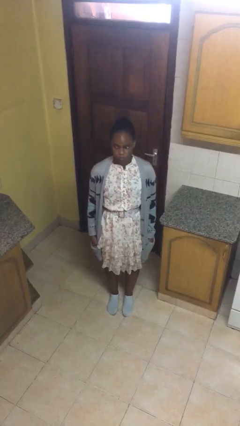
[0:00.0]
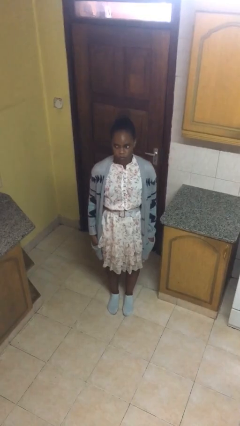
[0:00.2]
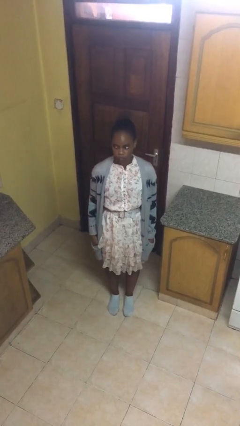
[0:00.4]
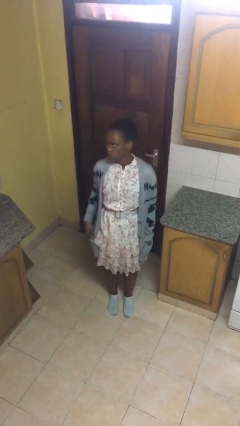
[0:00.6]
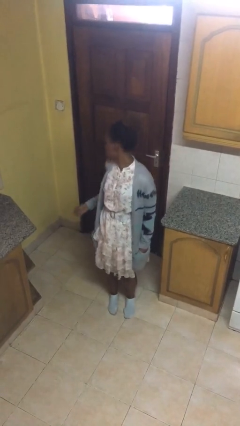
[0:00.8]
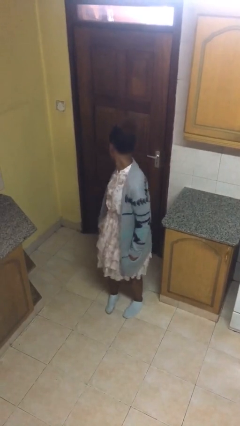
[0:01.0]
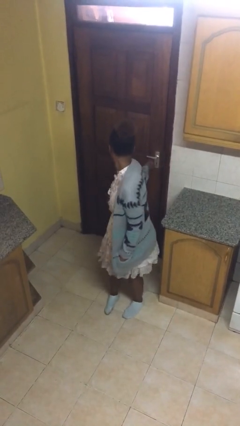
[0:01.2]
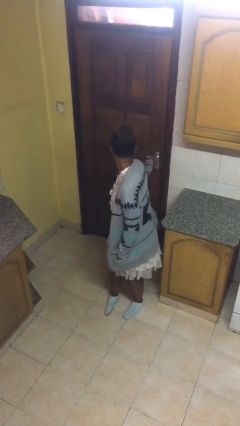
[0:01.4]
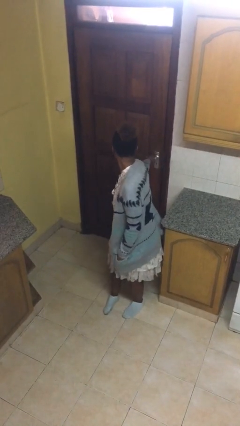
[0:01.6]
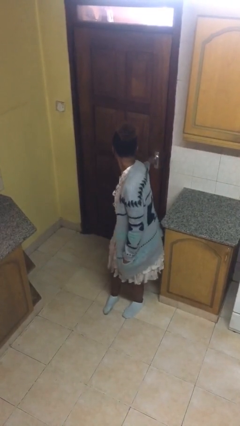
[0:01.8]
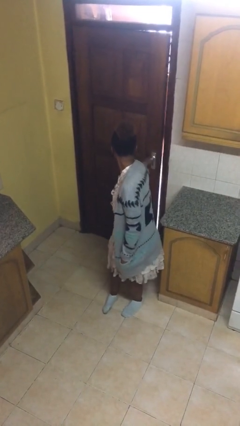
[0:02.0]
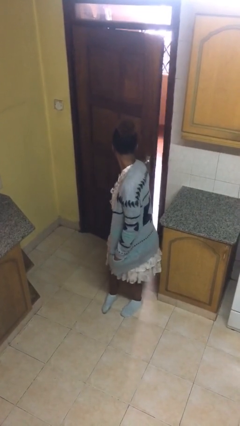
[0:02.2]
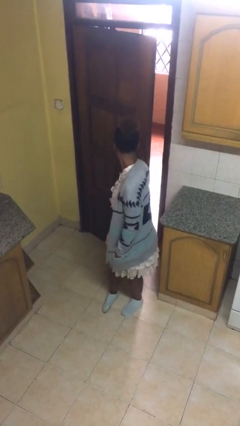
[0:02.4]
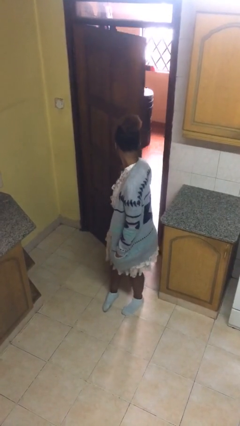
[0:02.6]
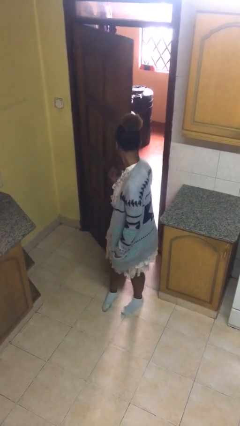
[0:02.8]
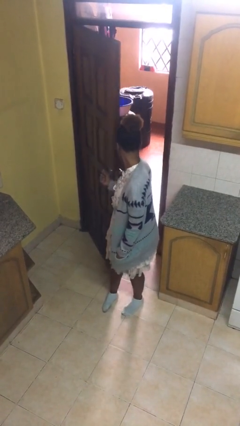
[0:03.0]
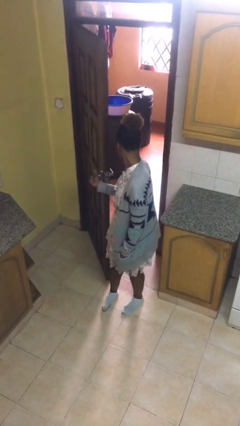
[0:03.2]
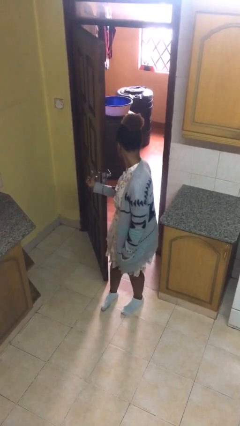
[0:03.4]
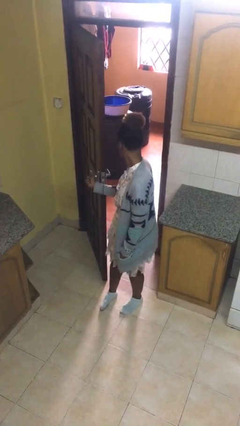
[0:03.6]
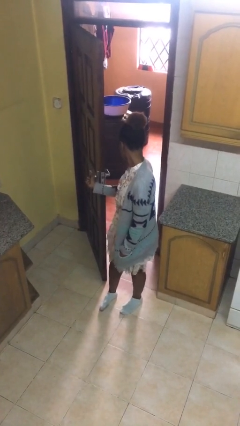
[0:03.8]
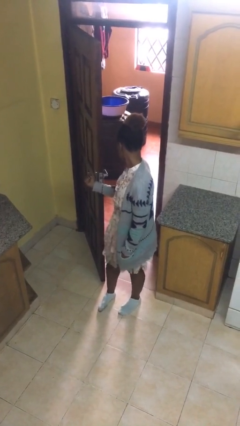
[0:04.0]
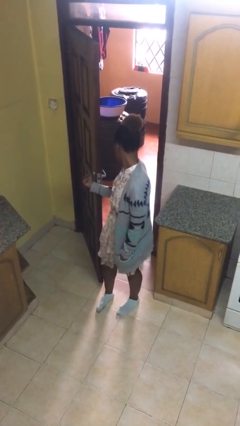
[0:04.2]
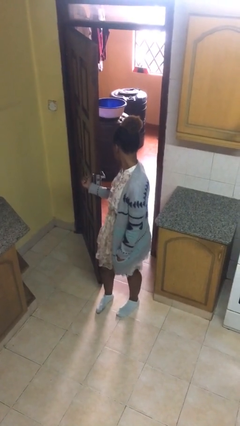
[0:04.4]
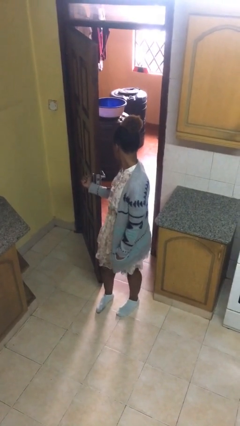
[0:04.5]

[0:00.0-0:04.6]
person opens facility door

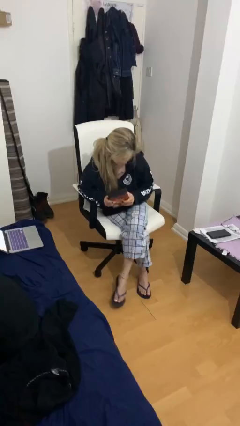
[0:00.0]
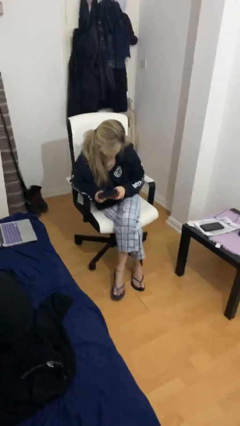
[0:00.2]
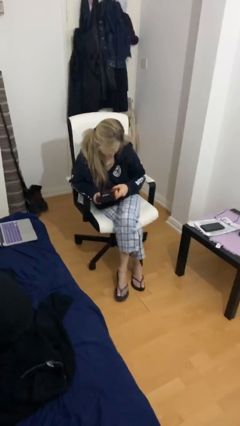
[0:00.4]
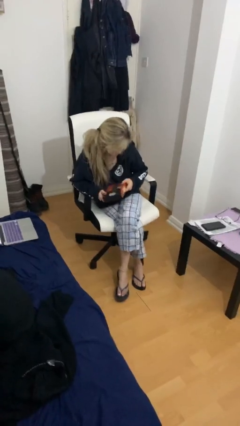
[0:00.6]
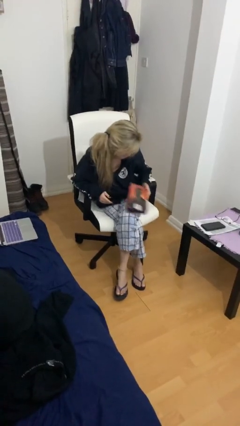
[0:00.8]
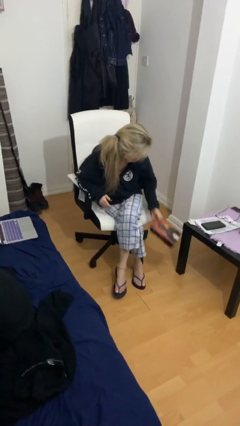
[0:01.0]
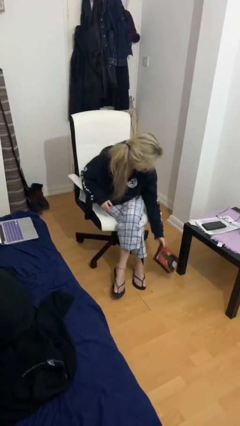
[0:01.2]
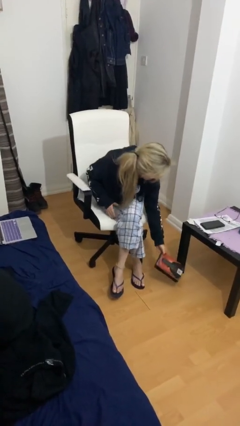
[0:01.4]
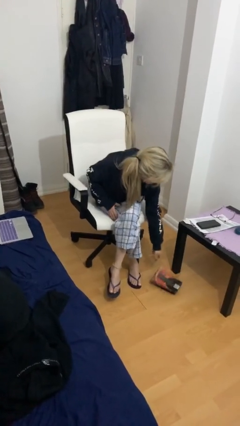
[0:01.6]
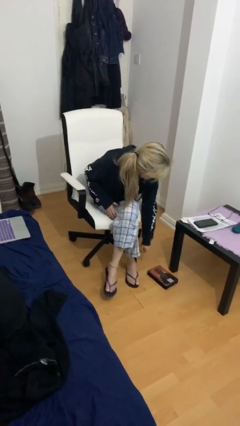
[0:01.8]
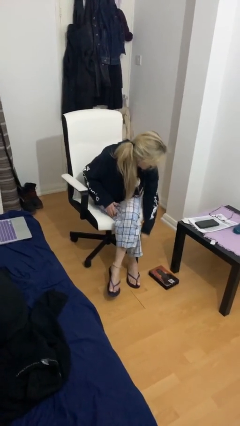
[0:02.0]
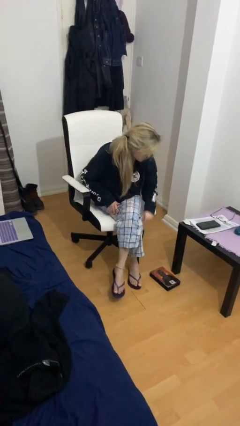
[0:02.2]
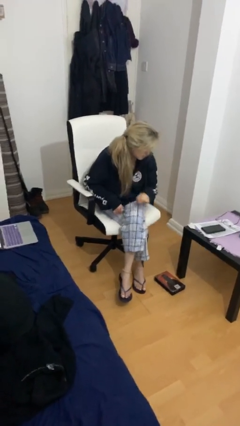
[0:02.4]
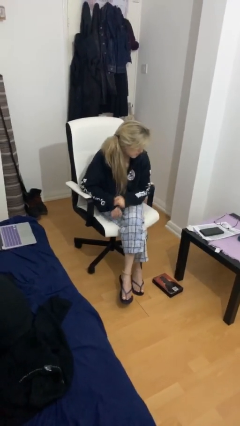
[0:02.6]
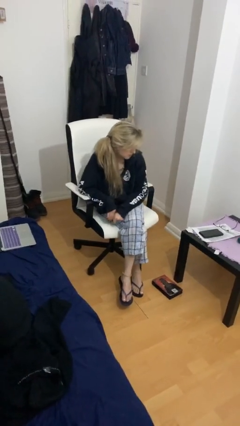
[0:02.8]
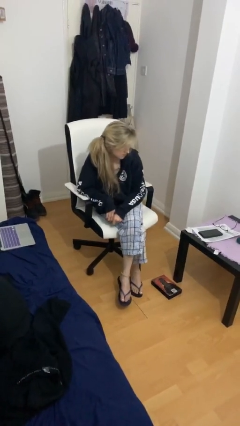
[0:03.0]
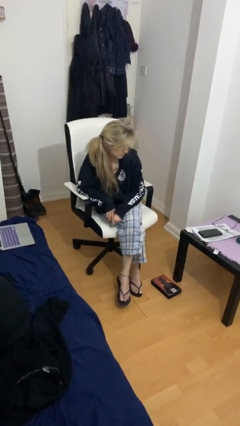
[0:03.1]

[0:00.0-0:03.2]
person puts down object on floor

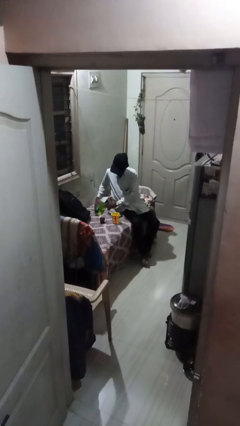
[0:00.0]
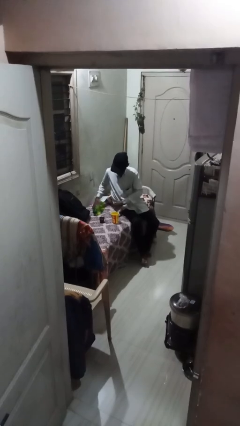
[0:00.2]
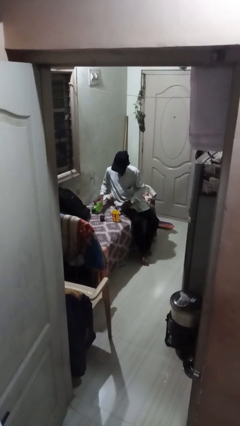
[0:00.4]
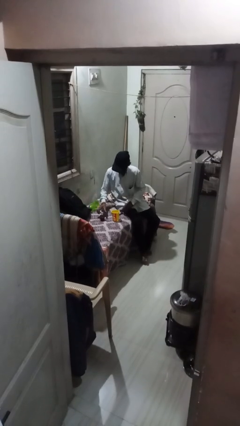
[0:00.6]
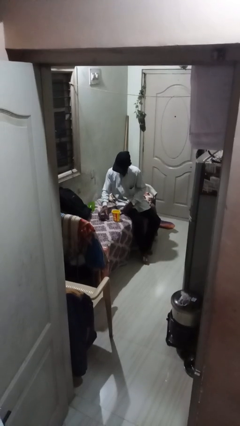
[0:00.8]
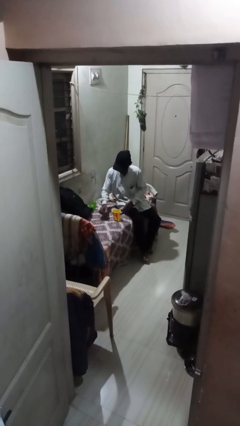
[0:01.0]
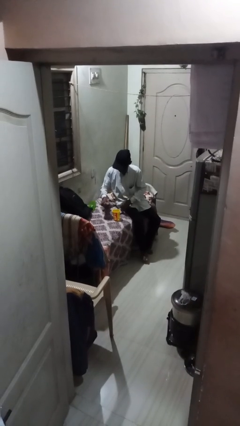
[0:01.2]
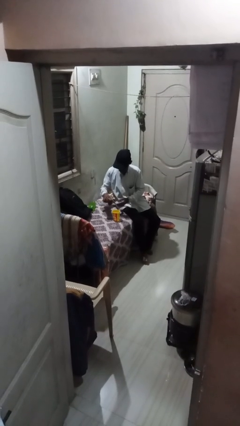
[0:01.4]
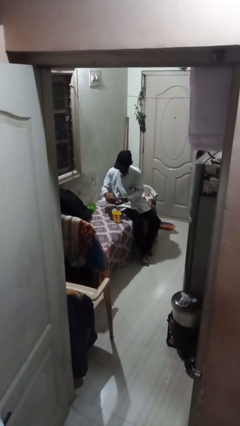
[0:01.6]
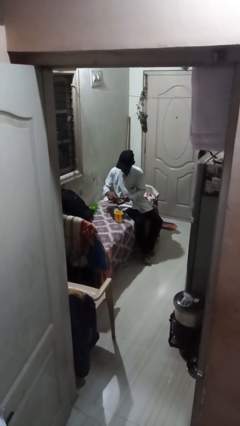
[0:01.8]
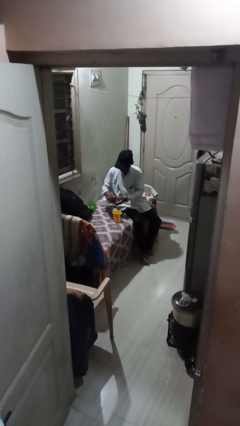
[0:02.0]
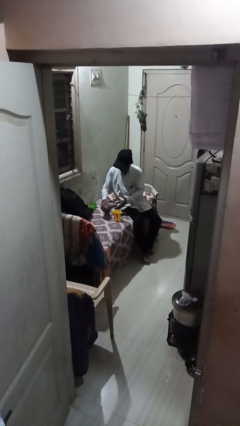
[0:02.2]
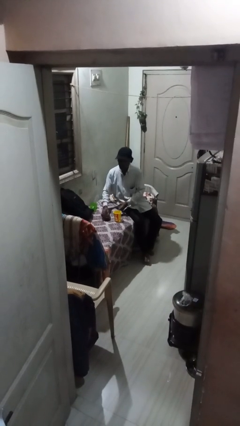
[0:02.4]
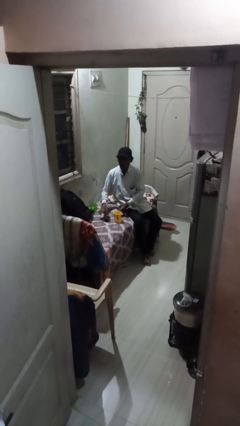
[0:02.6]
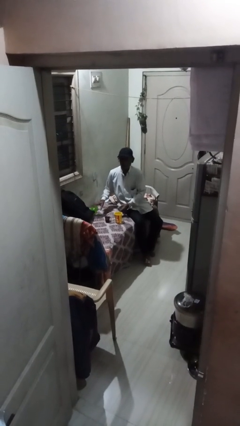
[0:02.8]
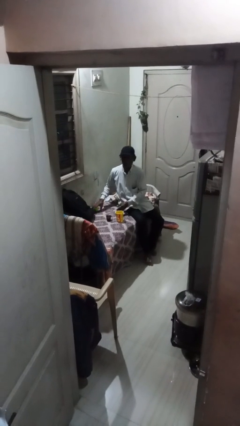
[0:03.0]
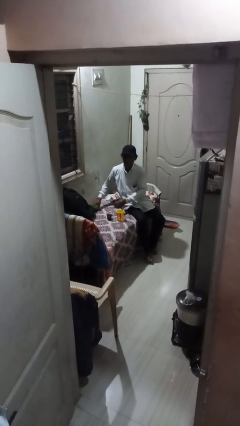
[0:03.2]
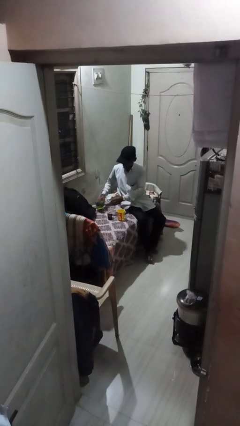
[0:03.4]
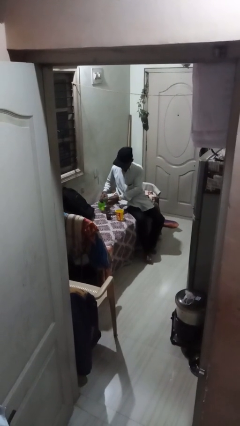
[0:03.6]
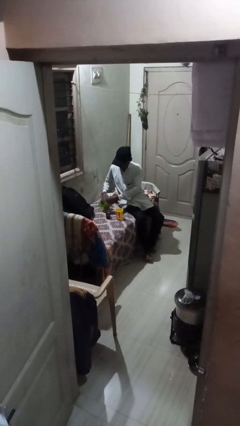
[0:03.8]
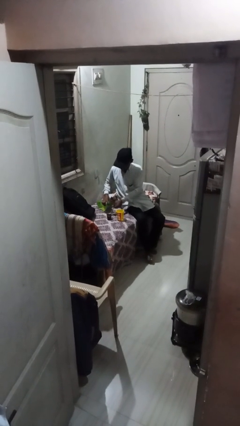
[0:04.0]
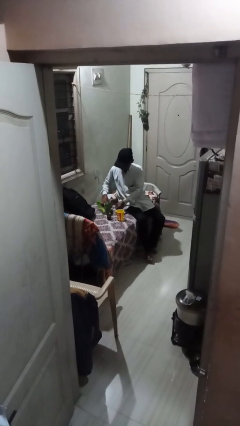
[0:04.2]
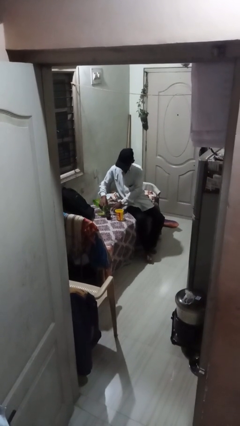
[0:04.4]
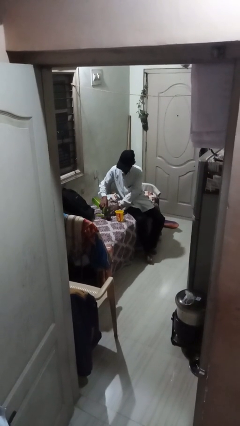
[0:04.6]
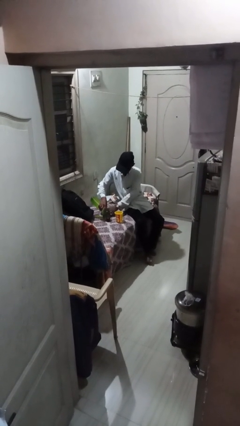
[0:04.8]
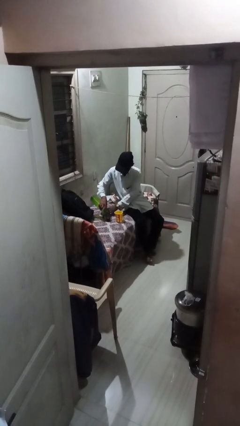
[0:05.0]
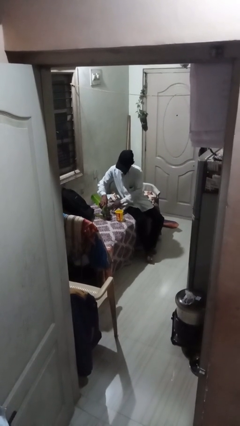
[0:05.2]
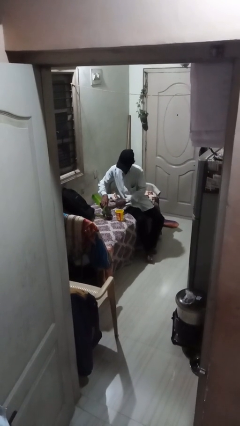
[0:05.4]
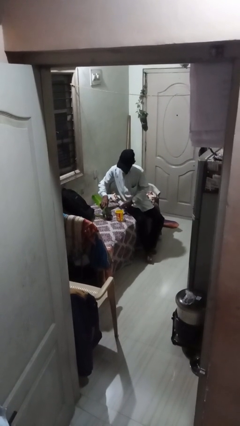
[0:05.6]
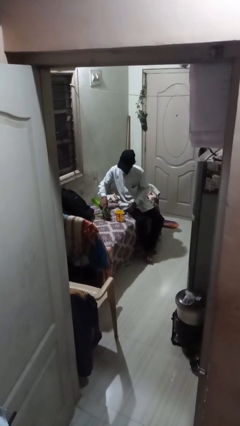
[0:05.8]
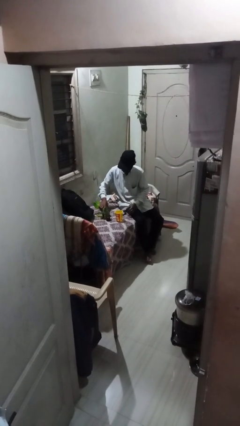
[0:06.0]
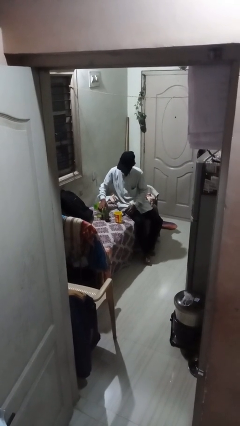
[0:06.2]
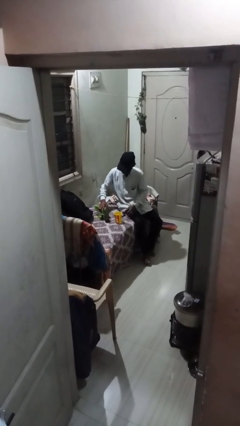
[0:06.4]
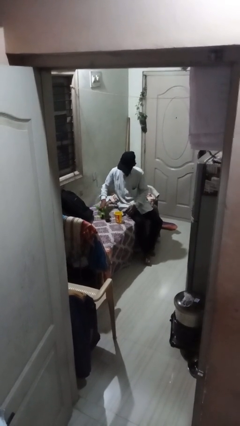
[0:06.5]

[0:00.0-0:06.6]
person pours liquid into cup

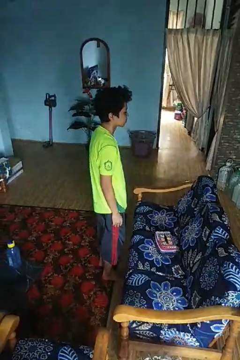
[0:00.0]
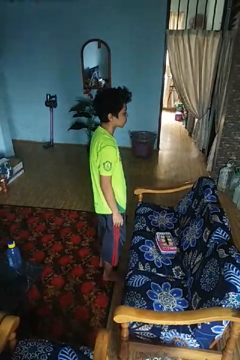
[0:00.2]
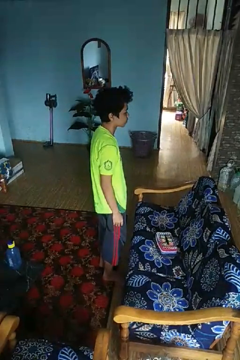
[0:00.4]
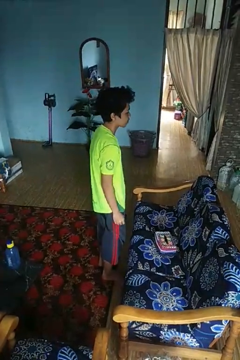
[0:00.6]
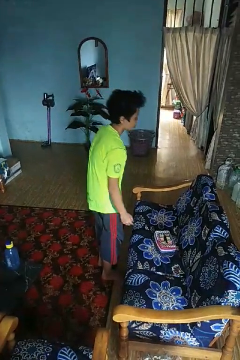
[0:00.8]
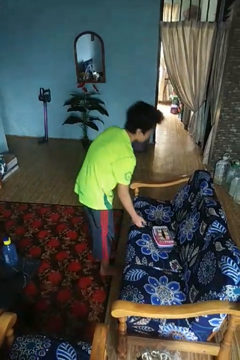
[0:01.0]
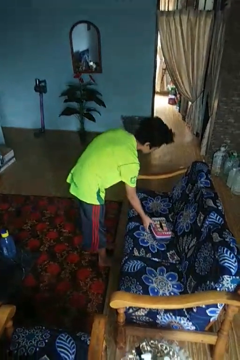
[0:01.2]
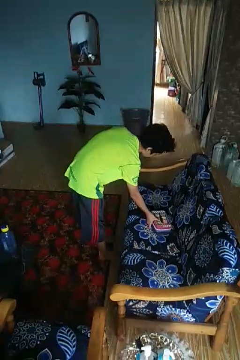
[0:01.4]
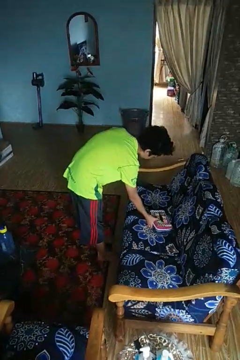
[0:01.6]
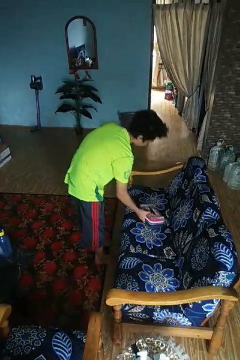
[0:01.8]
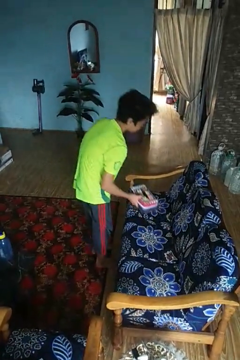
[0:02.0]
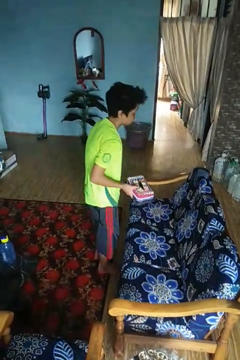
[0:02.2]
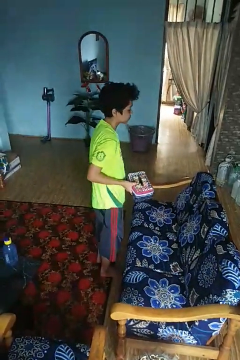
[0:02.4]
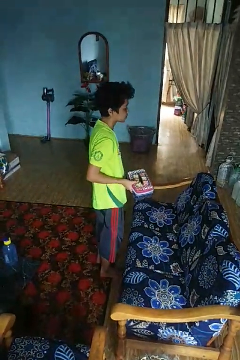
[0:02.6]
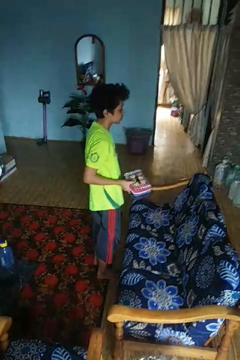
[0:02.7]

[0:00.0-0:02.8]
person picks up object from couch

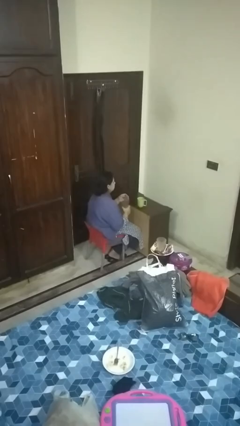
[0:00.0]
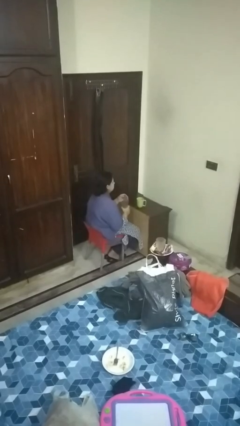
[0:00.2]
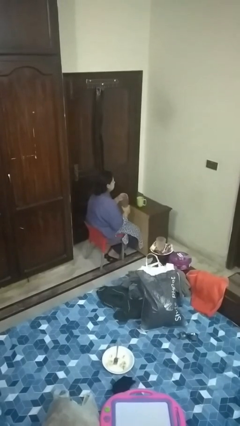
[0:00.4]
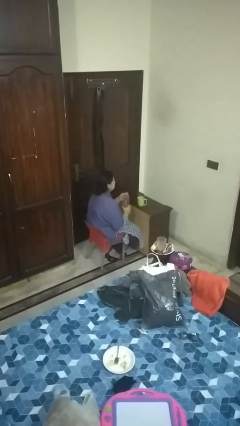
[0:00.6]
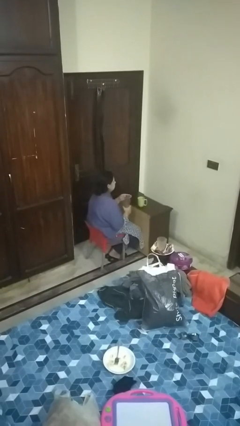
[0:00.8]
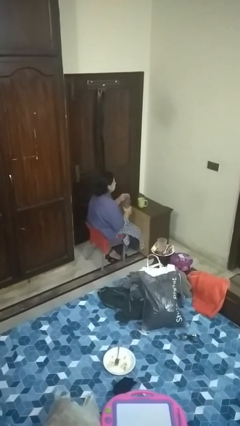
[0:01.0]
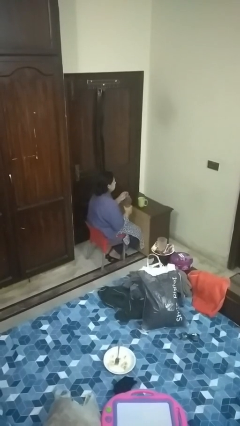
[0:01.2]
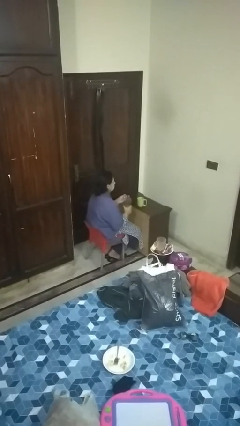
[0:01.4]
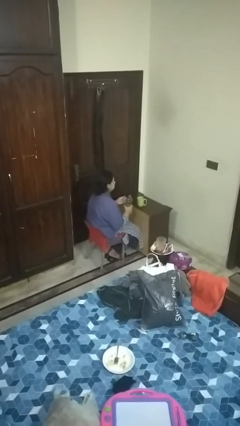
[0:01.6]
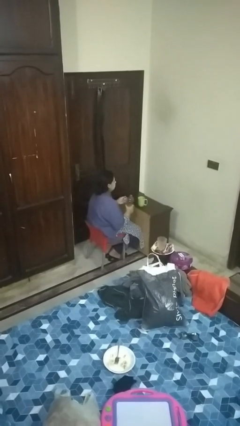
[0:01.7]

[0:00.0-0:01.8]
person unscrews lid from bottle
